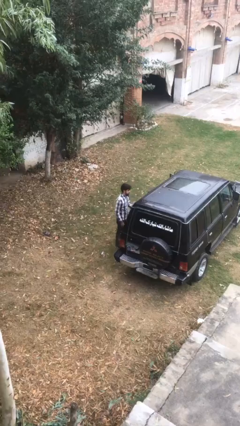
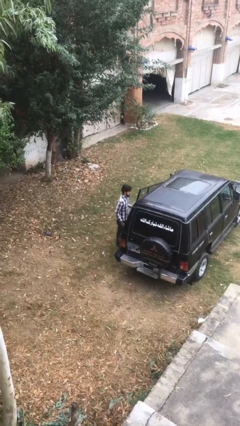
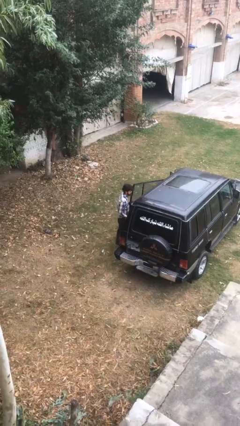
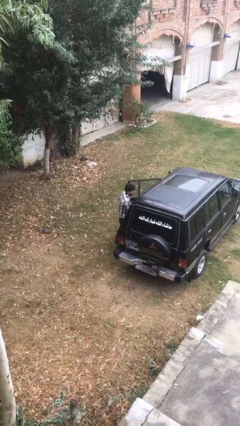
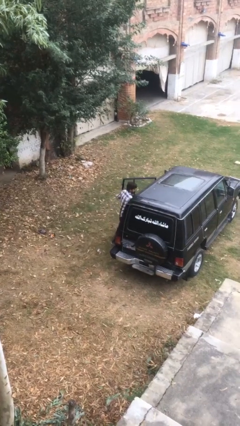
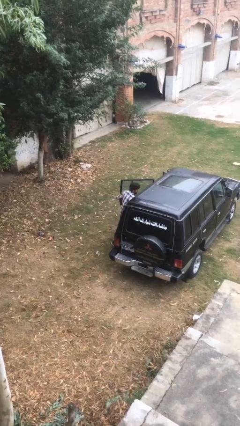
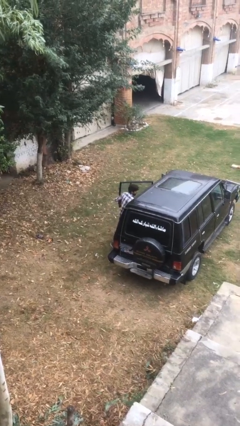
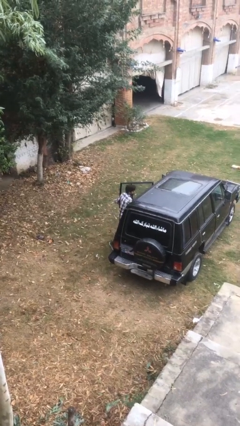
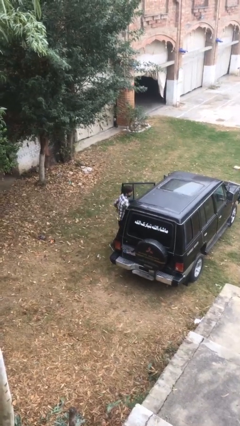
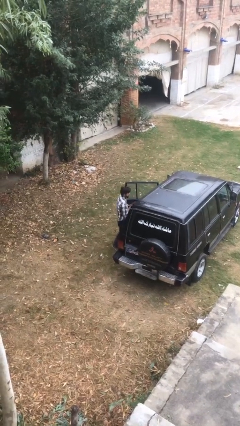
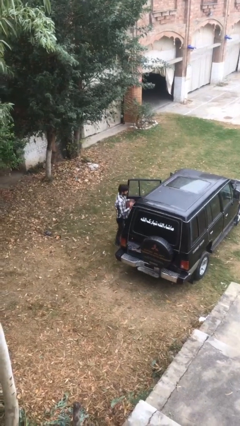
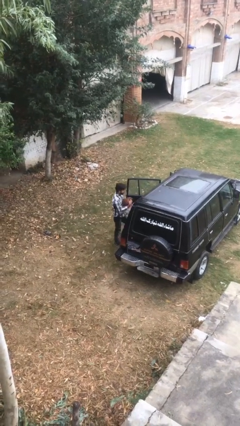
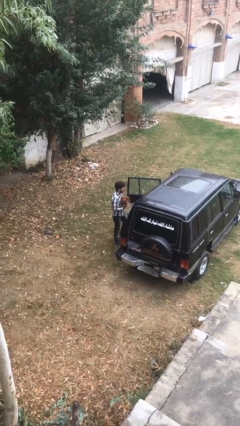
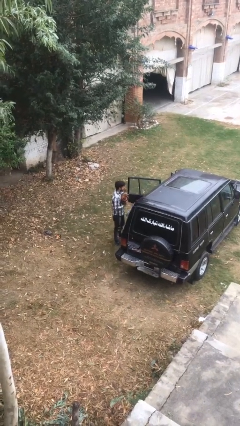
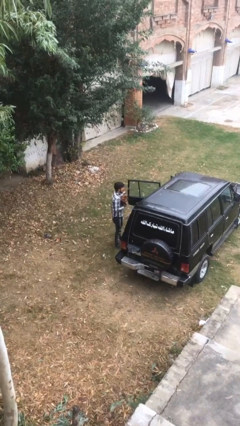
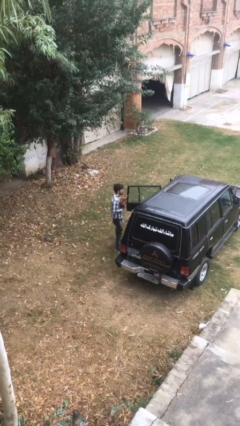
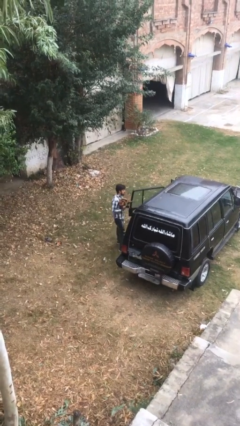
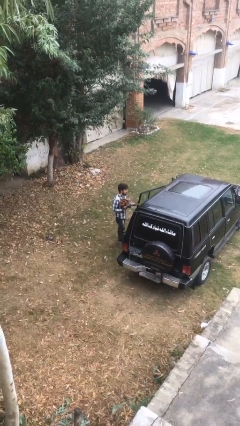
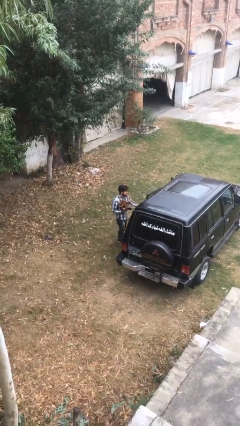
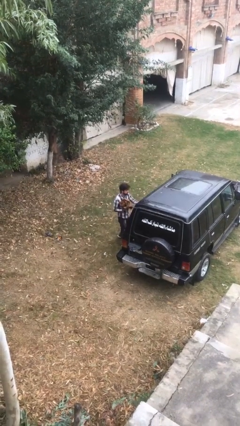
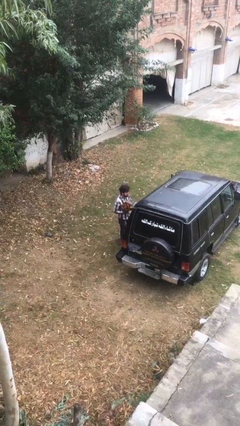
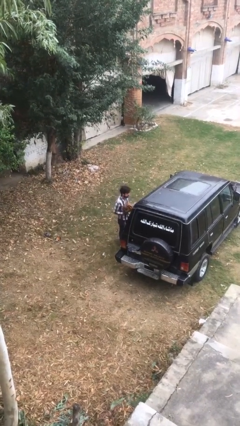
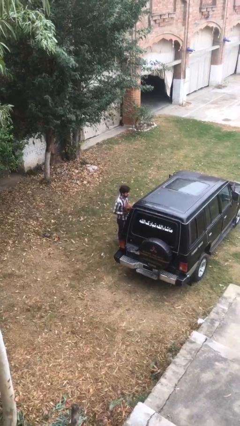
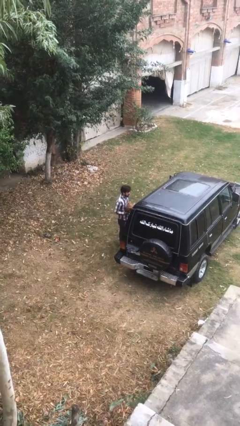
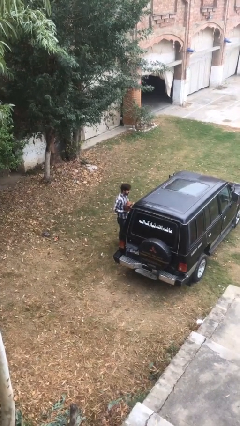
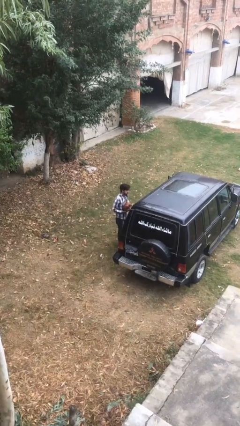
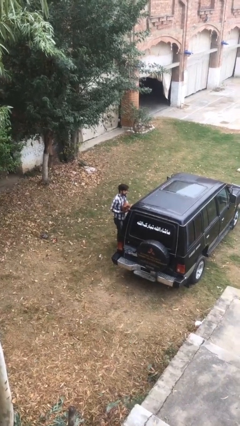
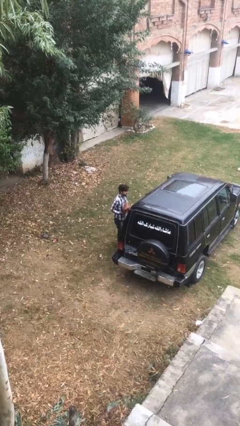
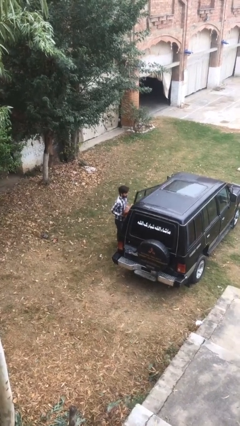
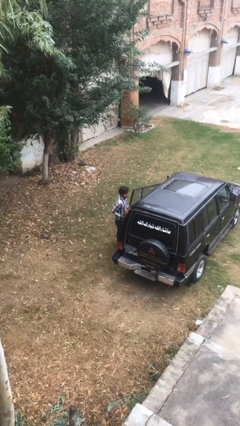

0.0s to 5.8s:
person unloads car

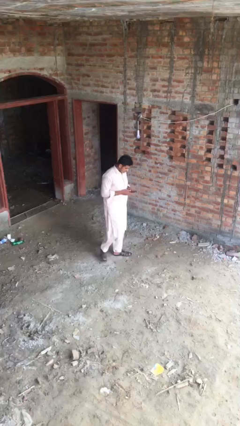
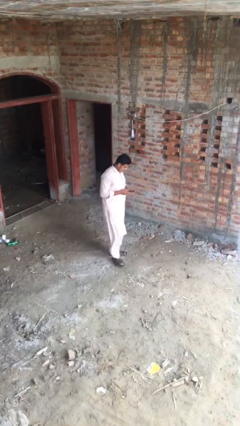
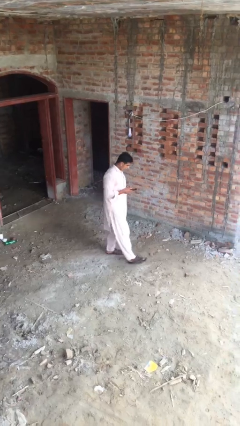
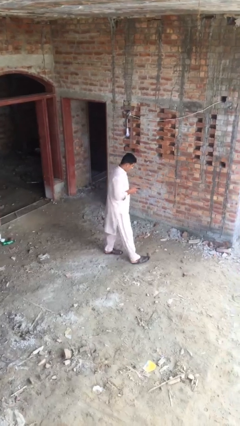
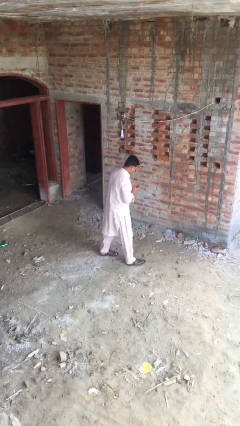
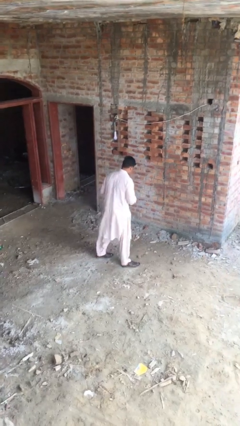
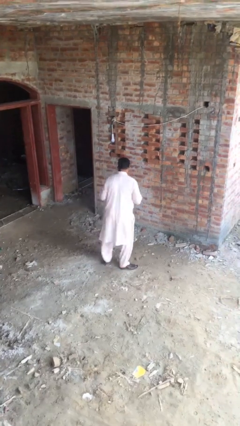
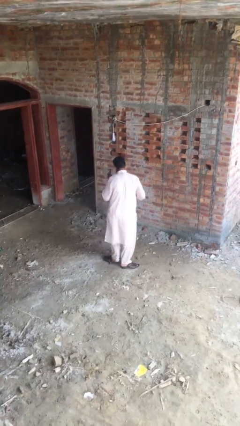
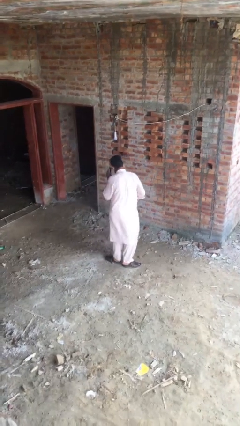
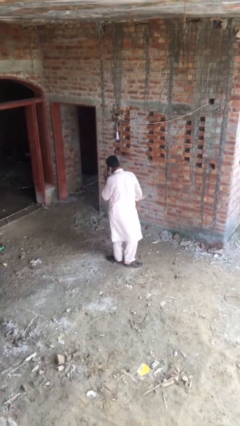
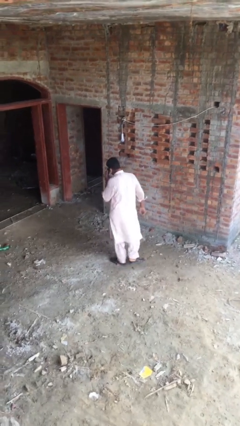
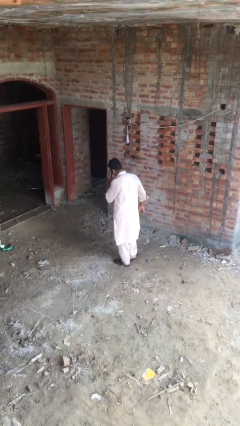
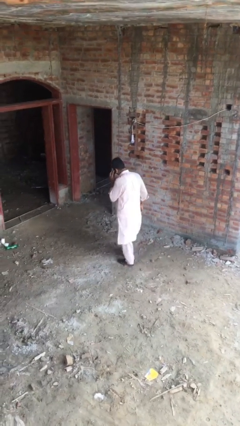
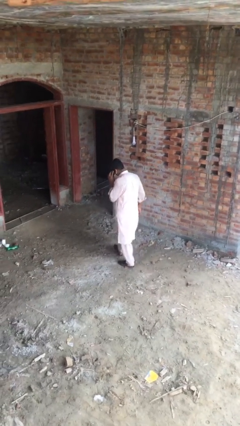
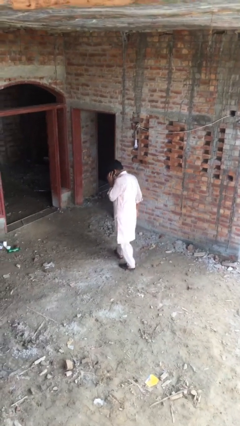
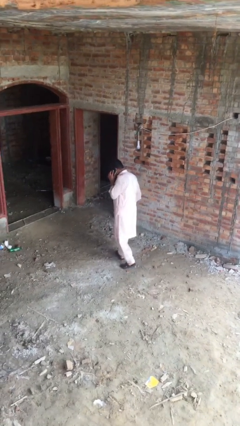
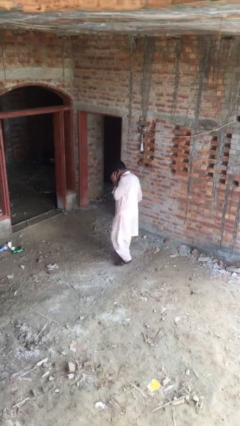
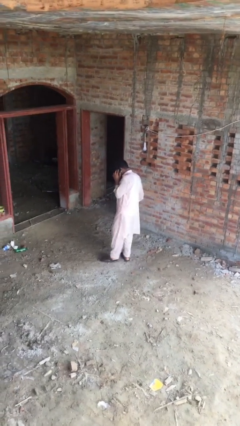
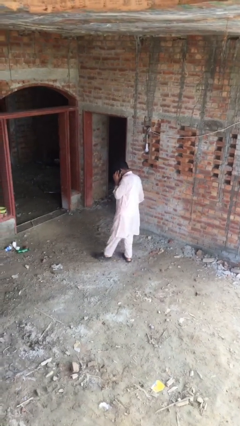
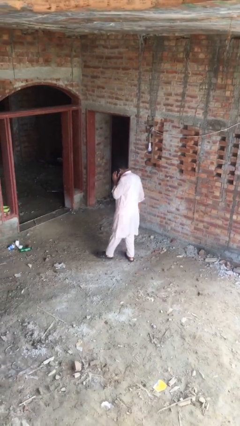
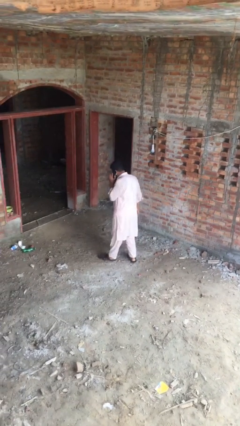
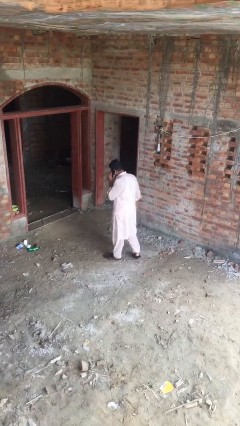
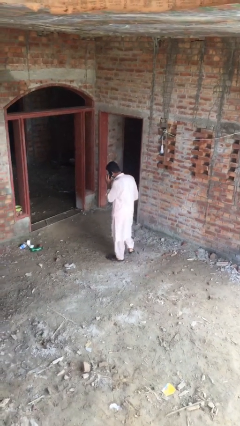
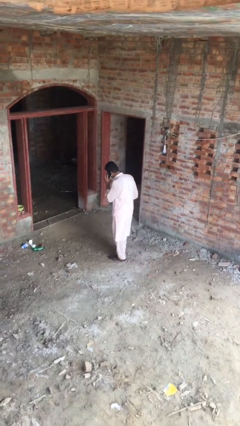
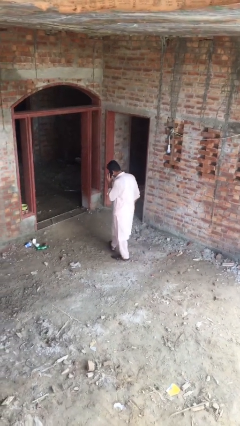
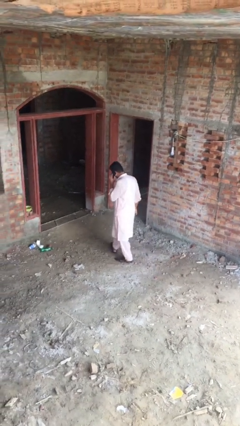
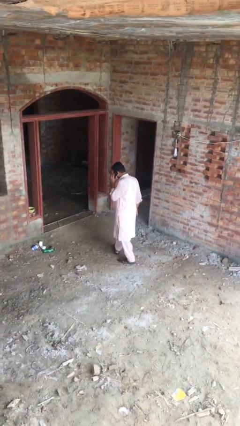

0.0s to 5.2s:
person talks on phone

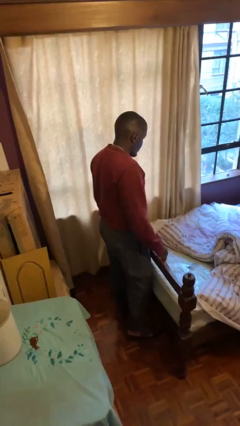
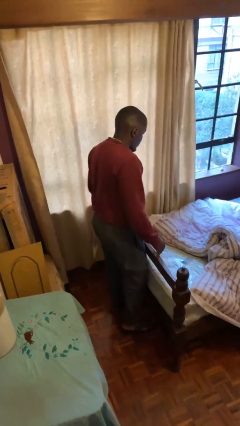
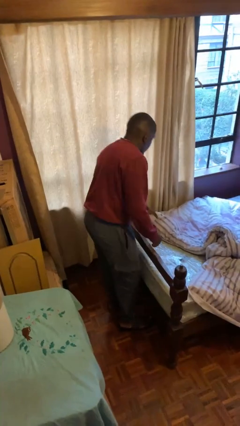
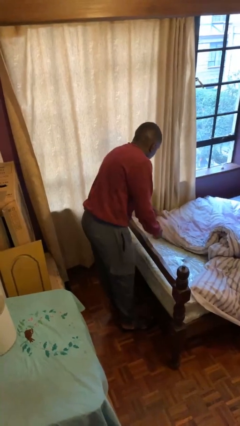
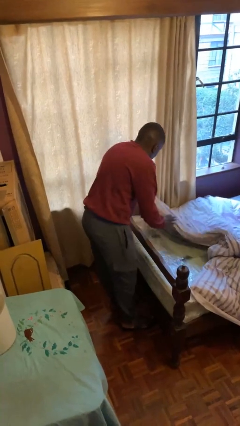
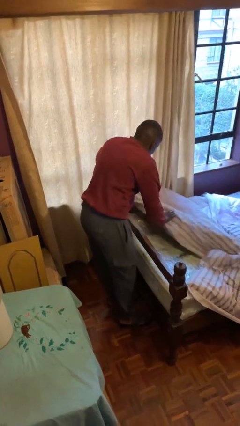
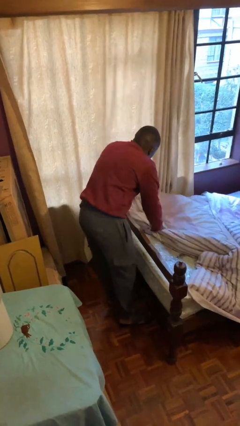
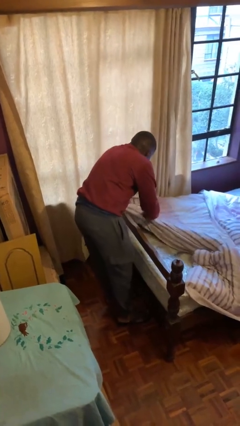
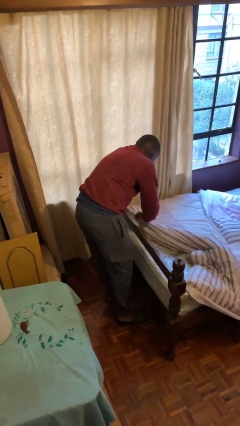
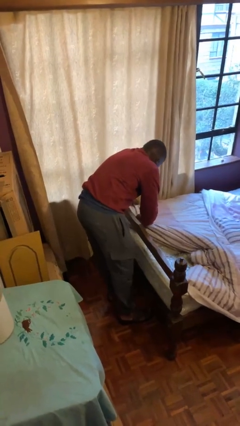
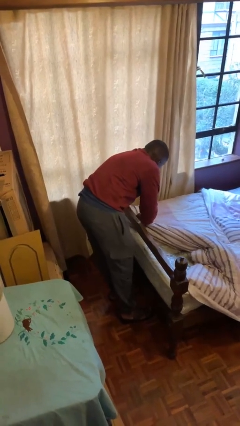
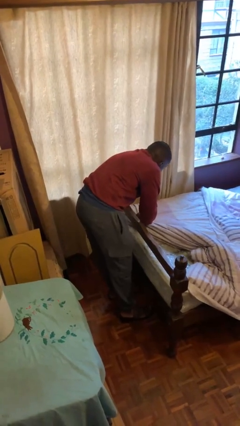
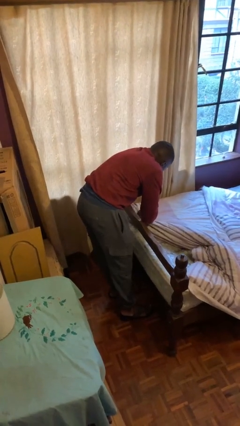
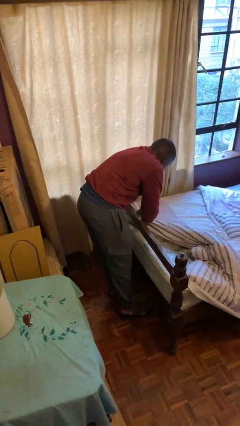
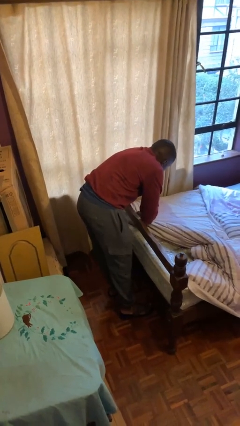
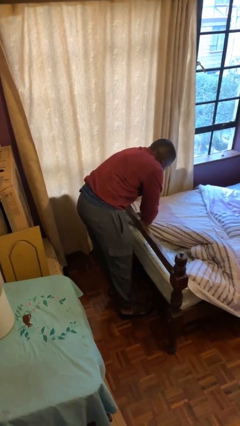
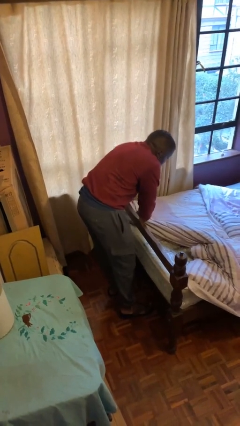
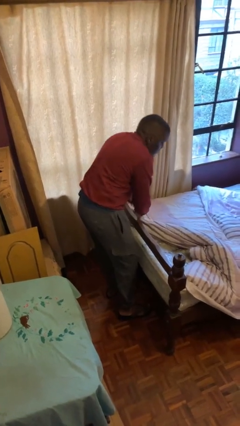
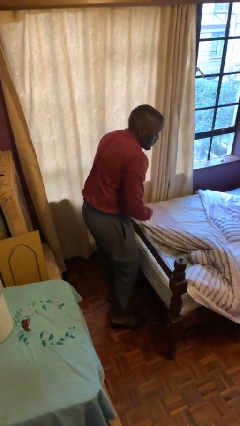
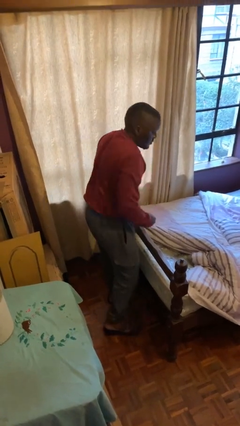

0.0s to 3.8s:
person makes bed

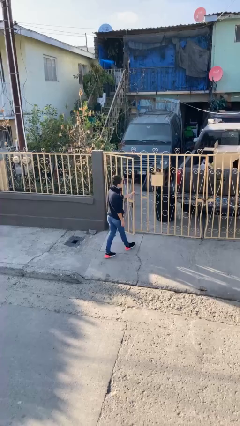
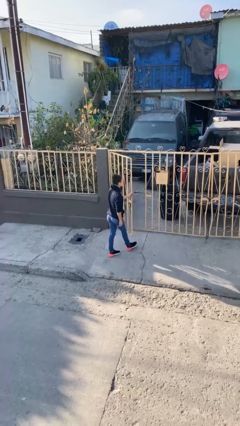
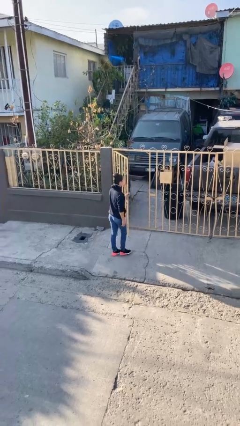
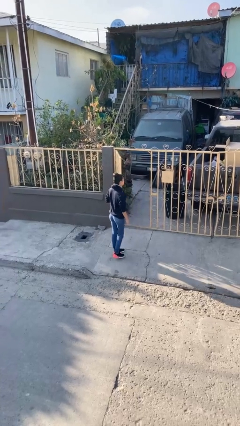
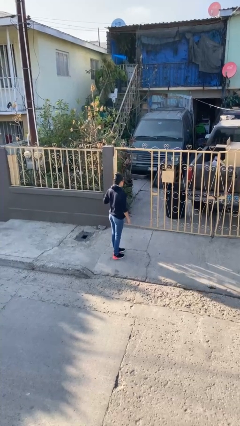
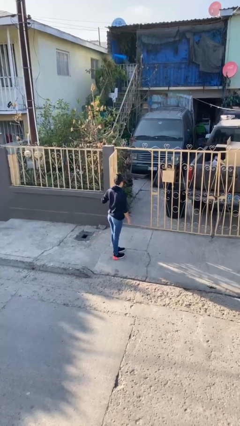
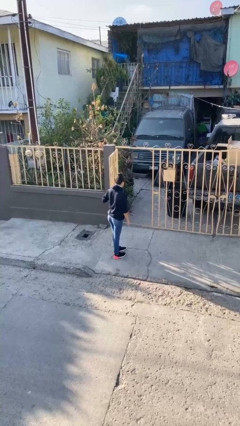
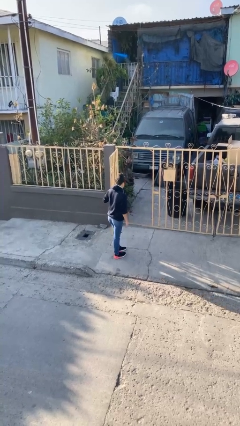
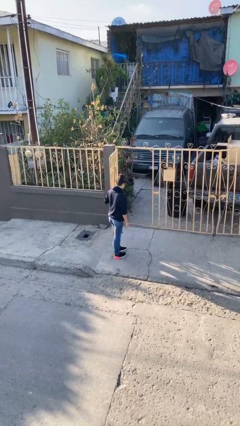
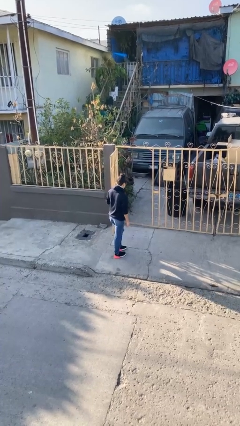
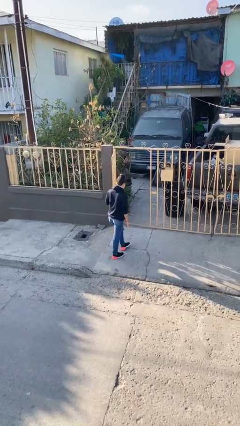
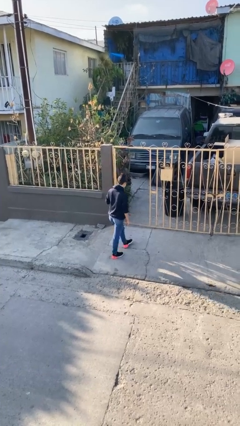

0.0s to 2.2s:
person opens facility door

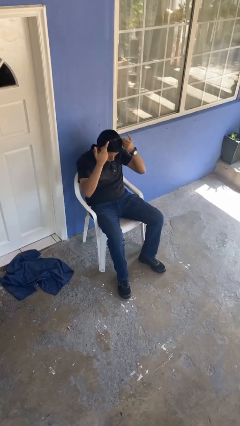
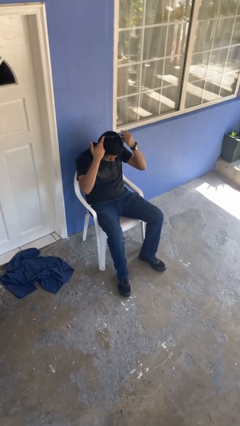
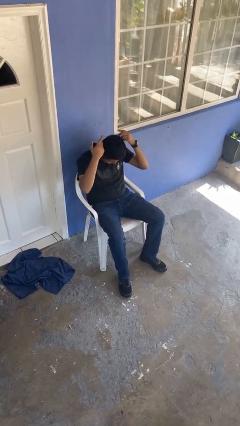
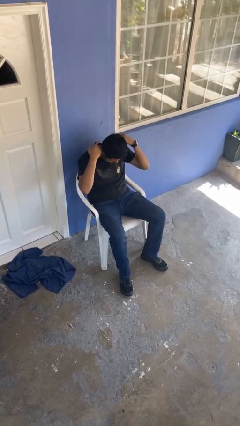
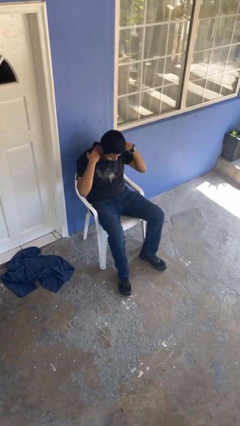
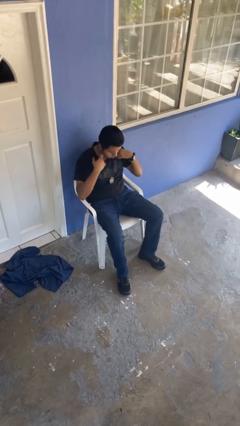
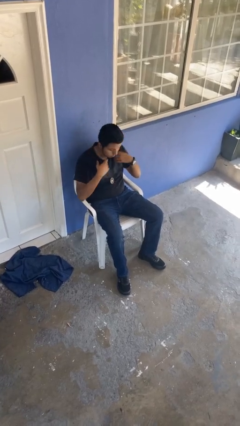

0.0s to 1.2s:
person puts on necklace
